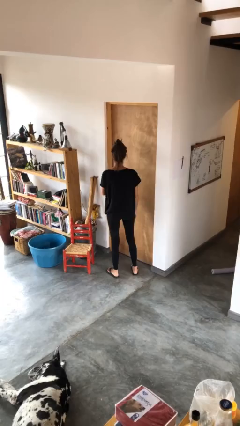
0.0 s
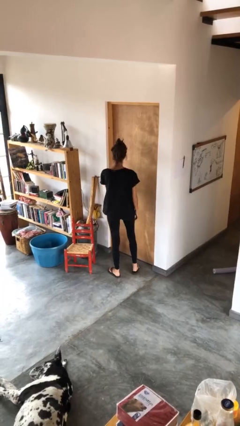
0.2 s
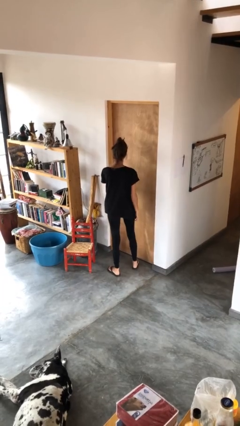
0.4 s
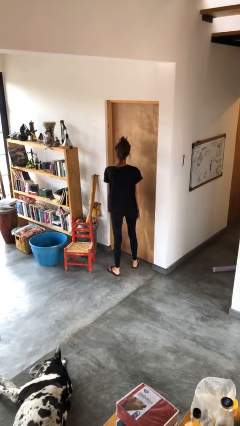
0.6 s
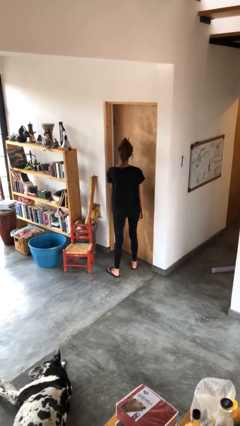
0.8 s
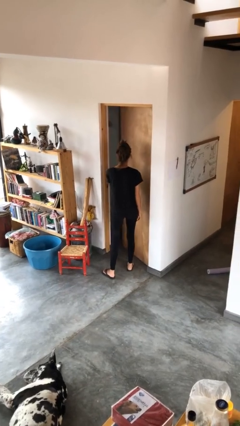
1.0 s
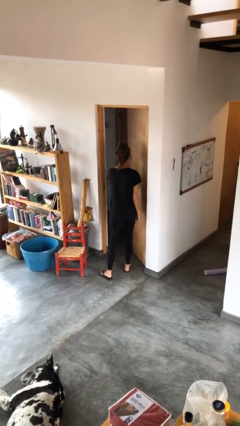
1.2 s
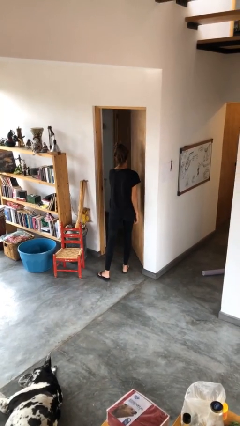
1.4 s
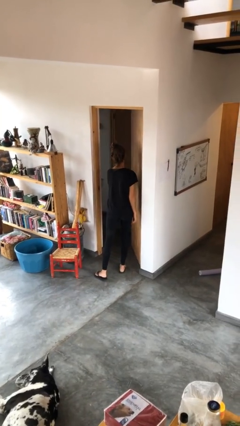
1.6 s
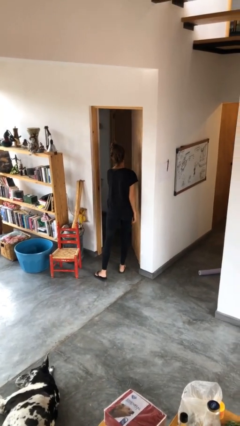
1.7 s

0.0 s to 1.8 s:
person opens facility door

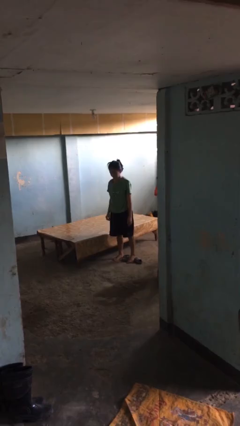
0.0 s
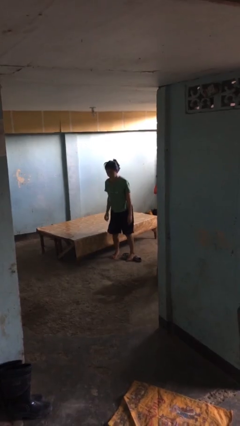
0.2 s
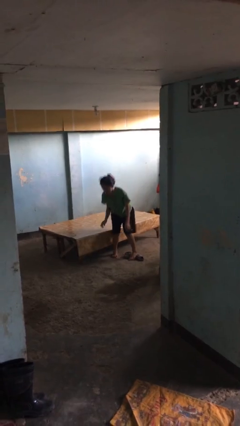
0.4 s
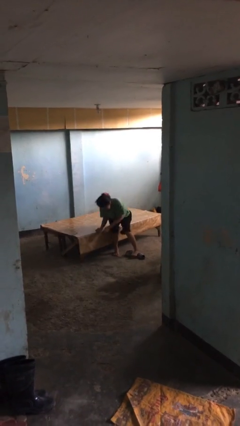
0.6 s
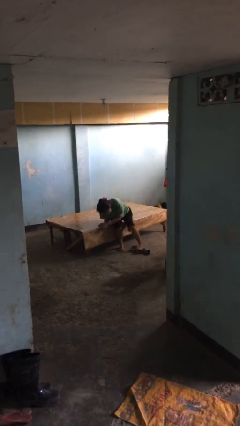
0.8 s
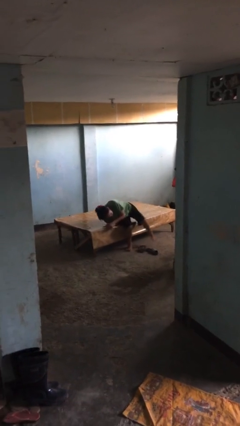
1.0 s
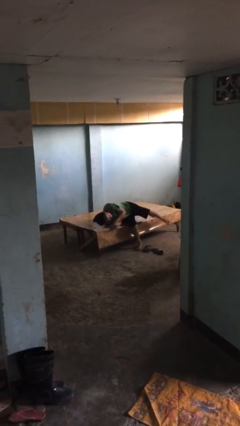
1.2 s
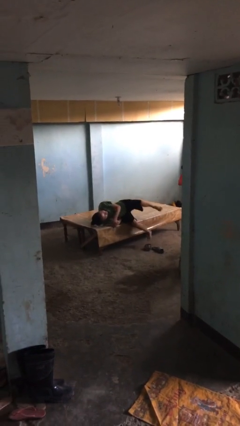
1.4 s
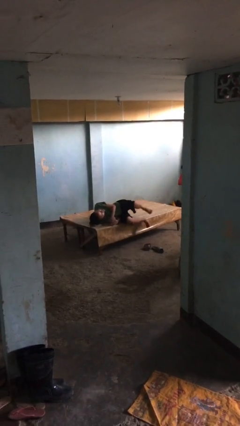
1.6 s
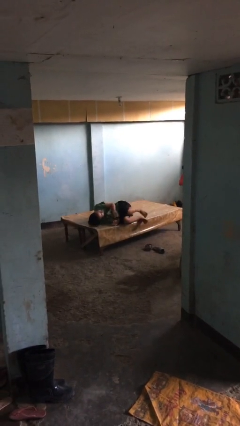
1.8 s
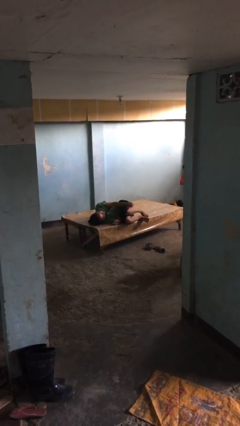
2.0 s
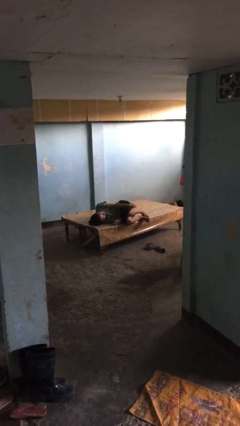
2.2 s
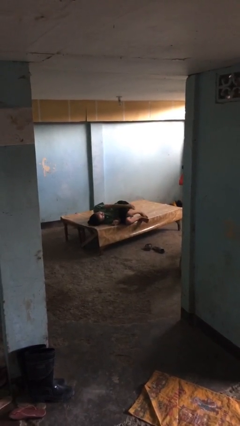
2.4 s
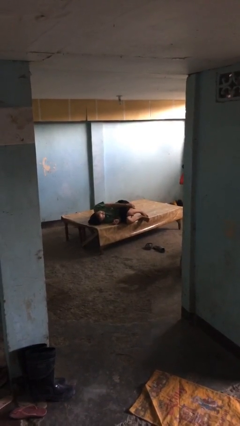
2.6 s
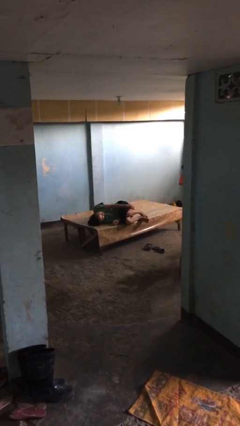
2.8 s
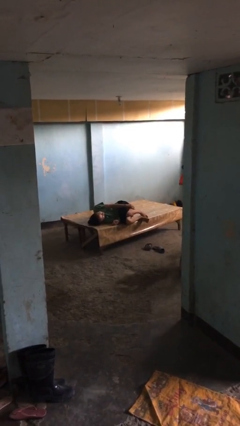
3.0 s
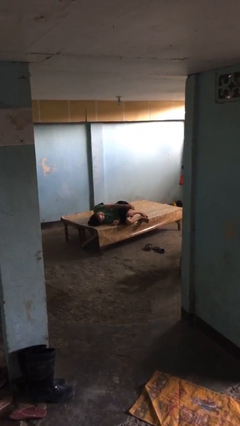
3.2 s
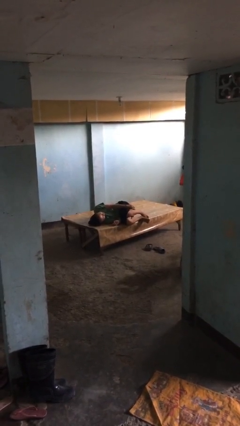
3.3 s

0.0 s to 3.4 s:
person lies down on bed

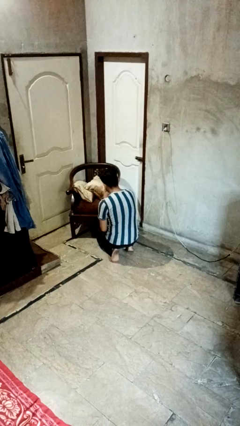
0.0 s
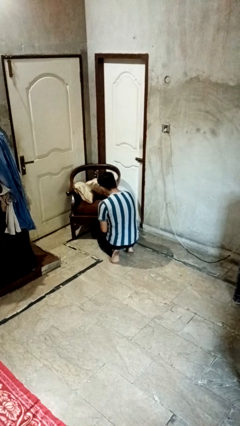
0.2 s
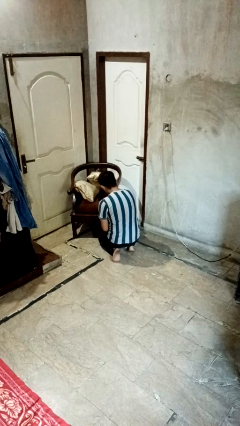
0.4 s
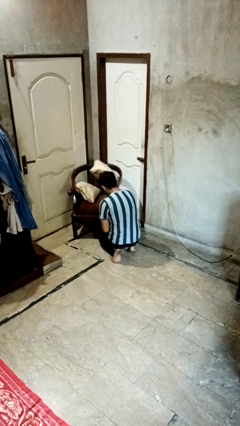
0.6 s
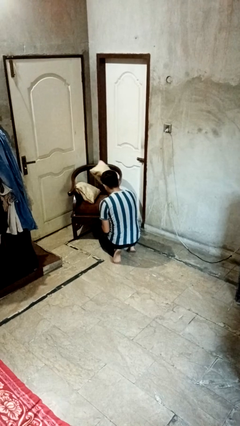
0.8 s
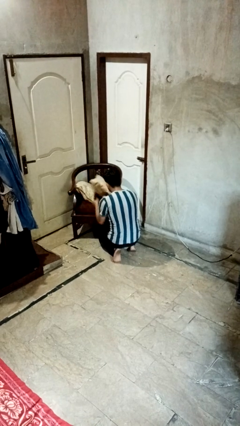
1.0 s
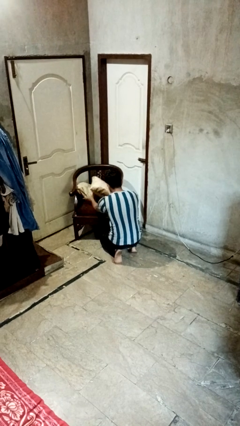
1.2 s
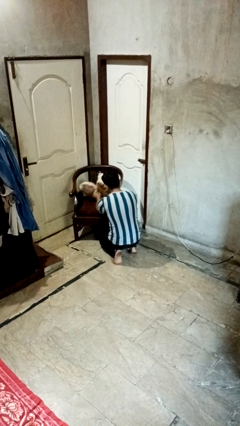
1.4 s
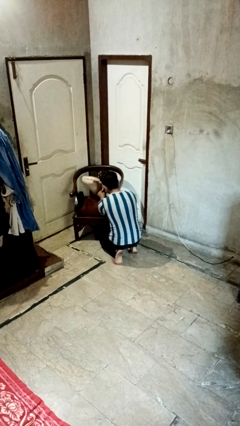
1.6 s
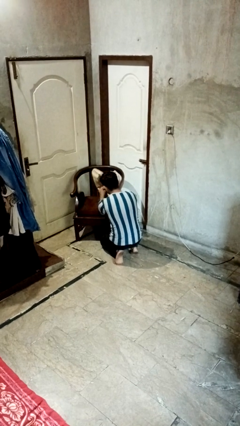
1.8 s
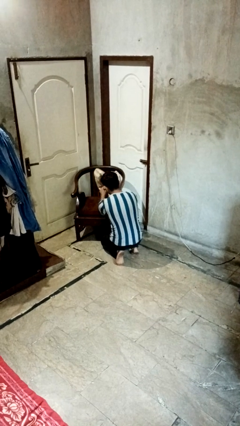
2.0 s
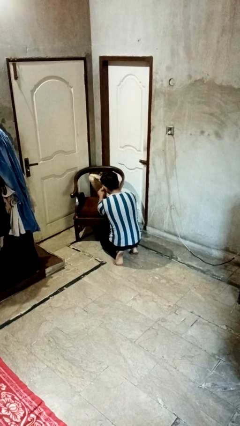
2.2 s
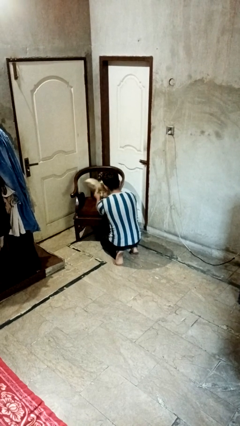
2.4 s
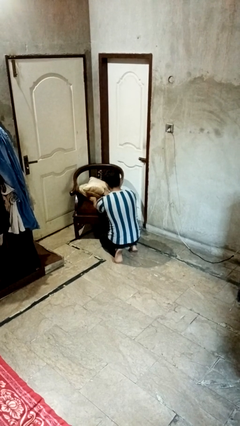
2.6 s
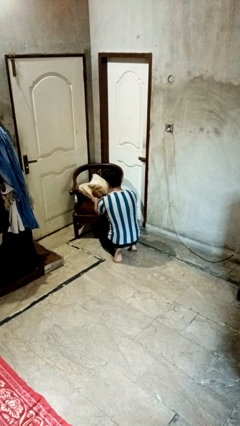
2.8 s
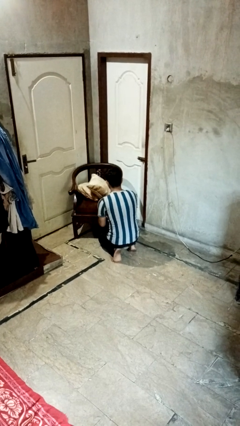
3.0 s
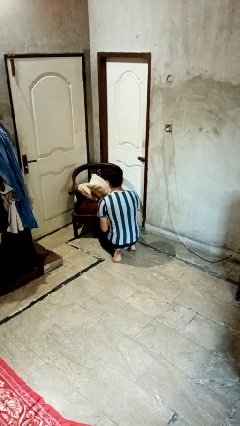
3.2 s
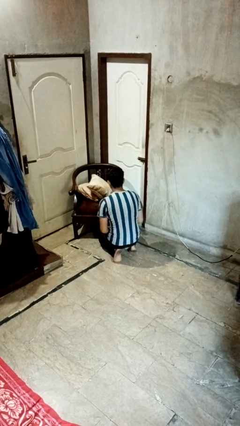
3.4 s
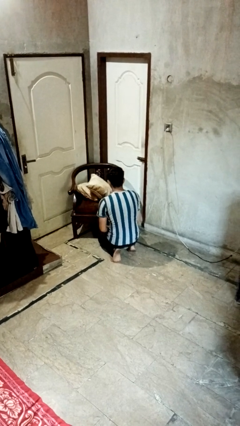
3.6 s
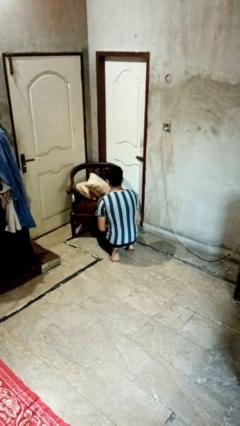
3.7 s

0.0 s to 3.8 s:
person searches in couch

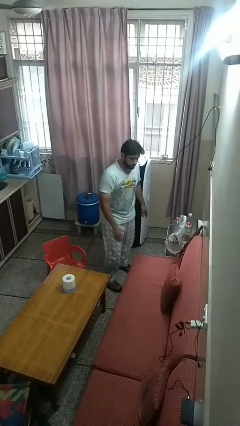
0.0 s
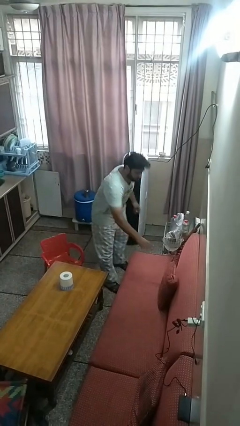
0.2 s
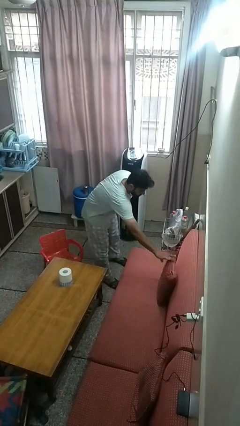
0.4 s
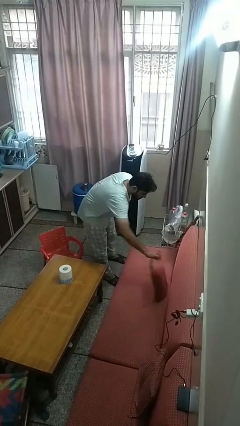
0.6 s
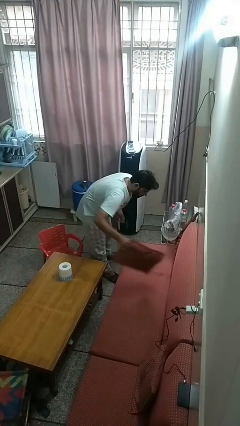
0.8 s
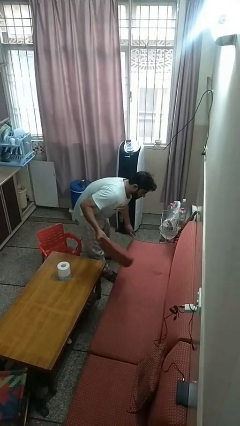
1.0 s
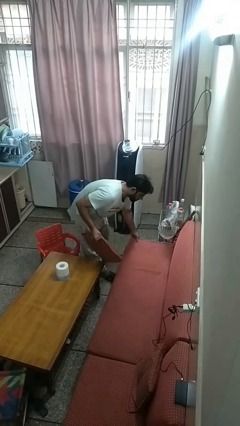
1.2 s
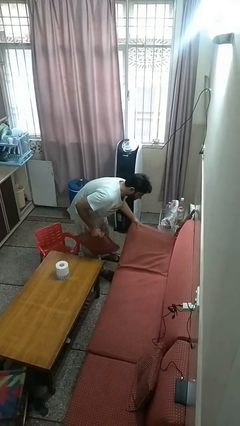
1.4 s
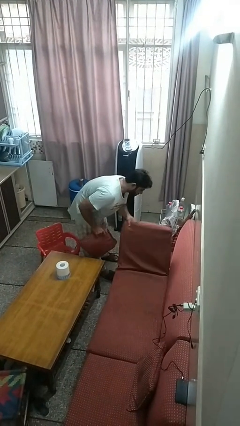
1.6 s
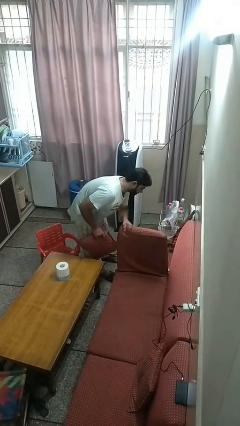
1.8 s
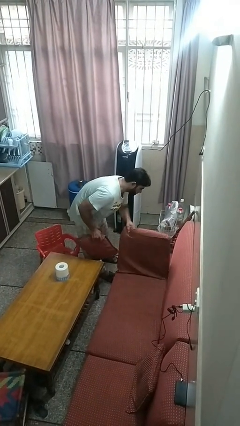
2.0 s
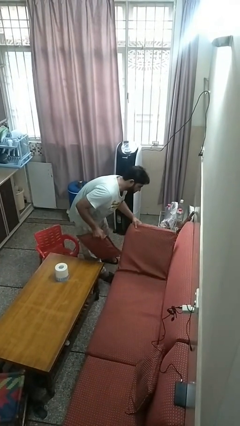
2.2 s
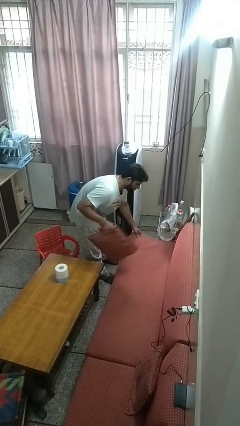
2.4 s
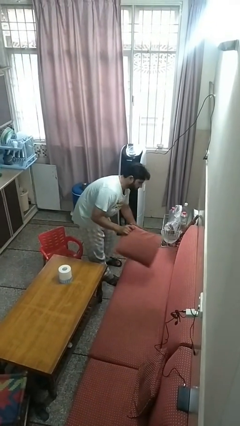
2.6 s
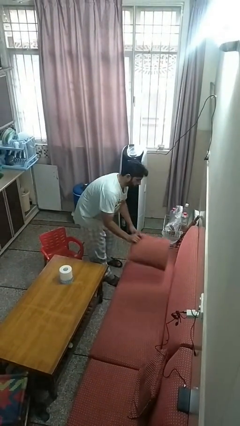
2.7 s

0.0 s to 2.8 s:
person searches under couch

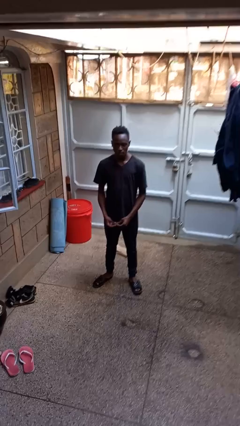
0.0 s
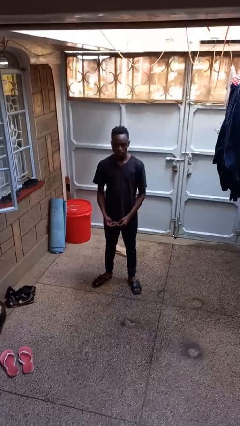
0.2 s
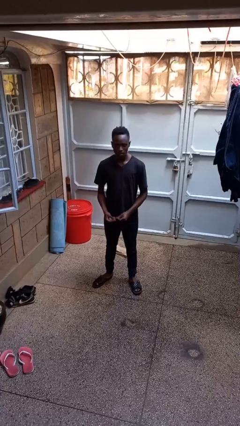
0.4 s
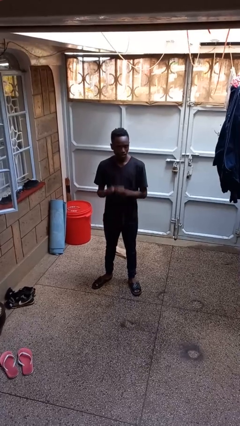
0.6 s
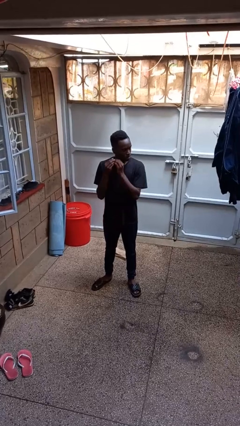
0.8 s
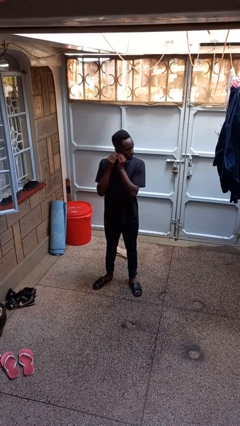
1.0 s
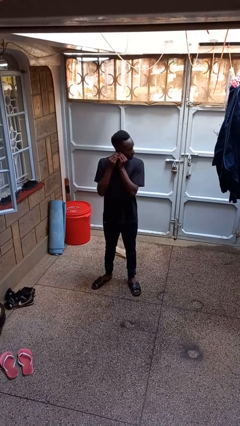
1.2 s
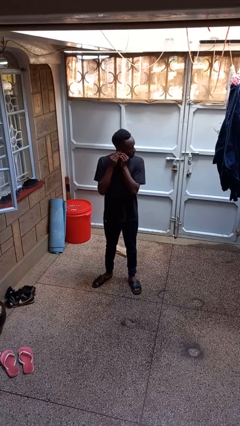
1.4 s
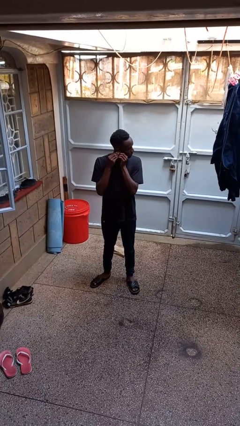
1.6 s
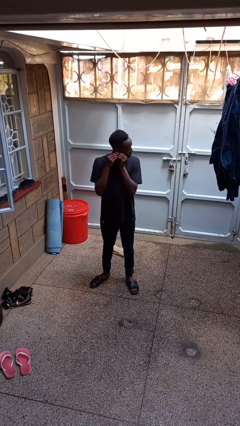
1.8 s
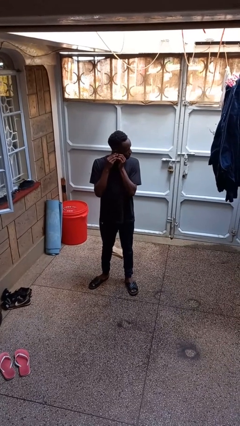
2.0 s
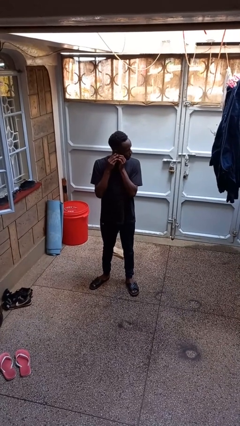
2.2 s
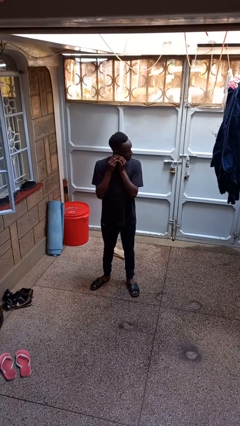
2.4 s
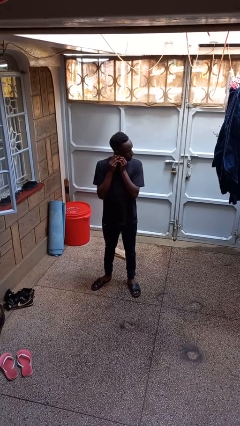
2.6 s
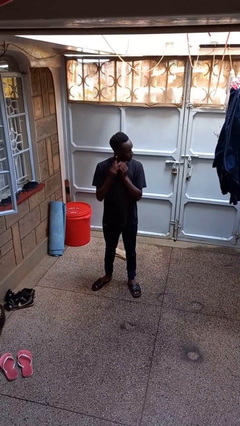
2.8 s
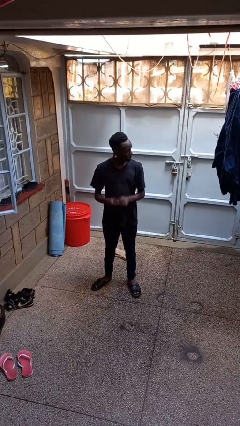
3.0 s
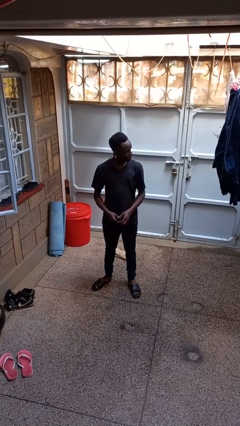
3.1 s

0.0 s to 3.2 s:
person puts on earrings

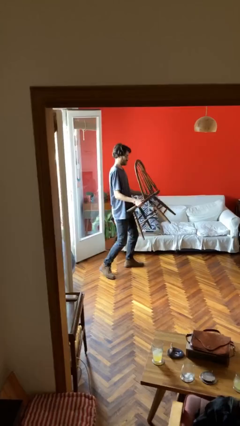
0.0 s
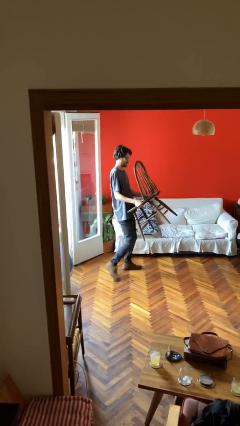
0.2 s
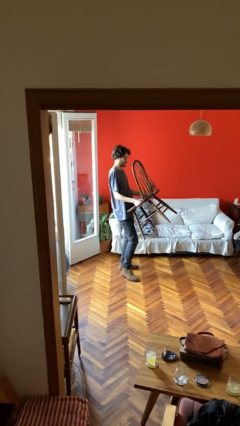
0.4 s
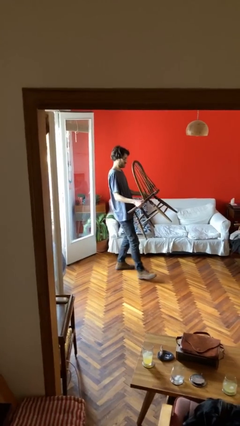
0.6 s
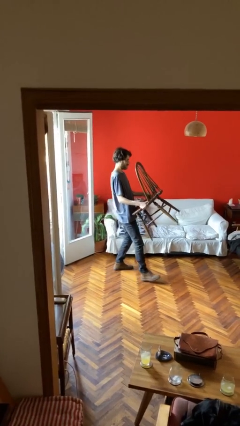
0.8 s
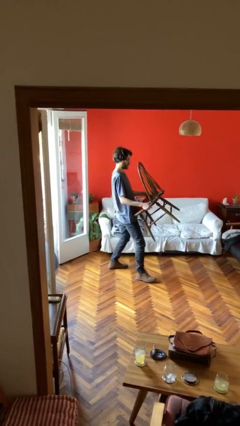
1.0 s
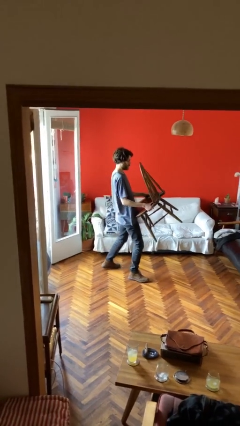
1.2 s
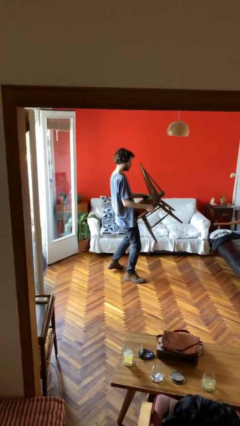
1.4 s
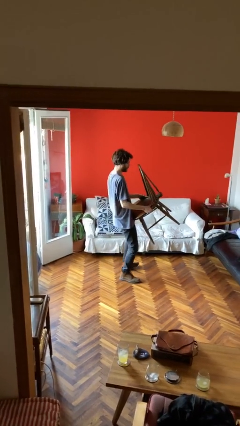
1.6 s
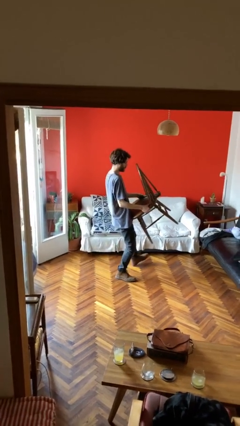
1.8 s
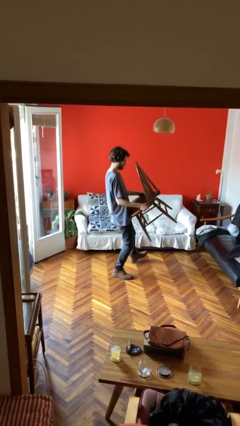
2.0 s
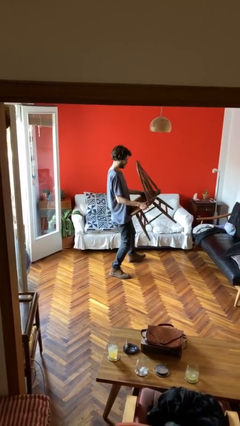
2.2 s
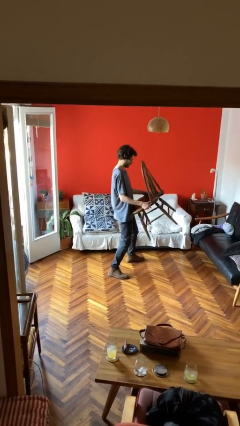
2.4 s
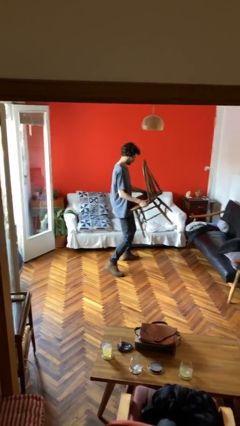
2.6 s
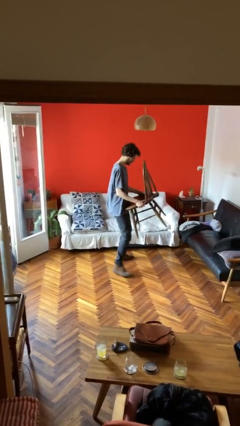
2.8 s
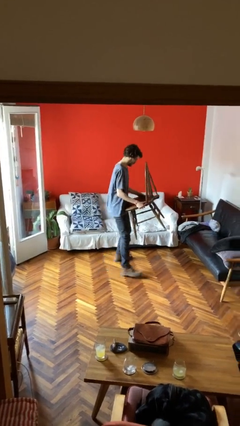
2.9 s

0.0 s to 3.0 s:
person carries heavy object
